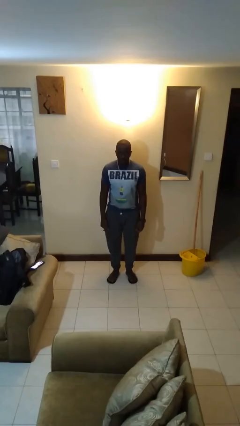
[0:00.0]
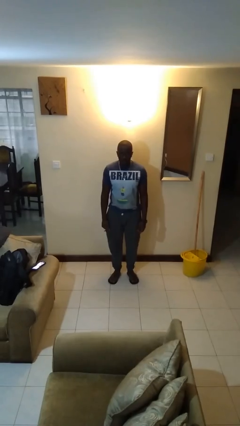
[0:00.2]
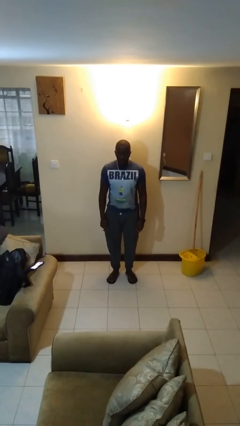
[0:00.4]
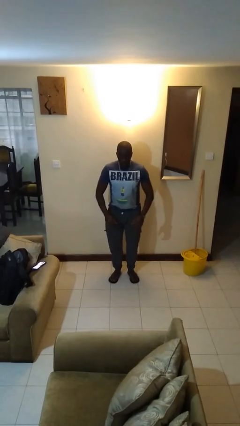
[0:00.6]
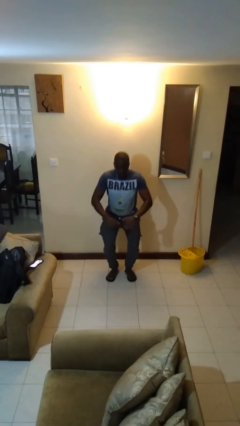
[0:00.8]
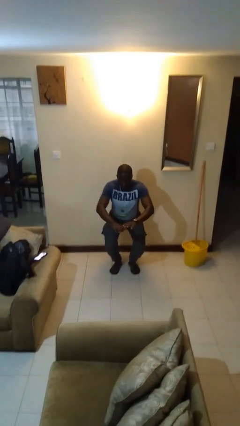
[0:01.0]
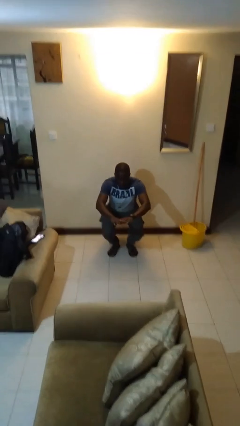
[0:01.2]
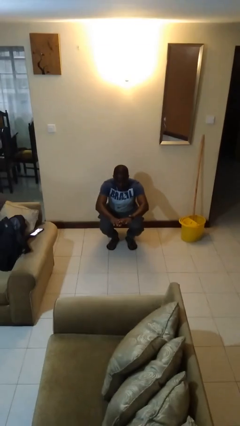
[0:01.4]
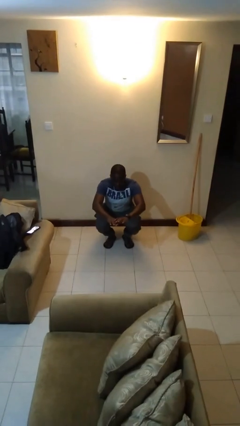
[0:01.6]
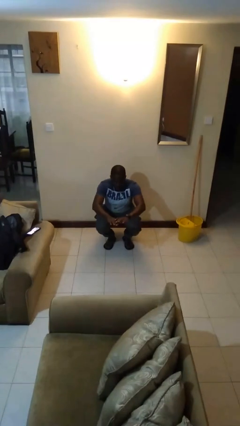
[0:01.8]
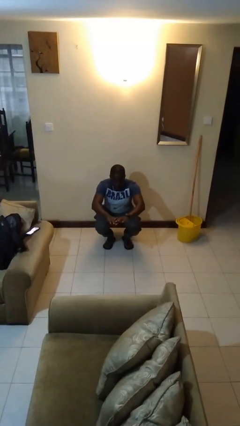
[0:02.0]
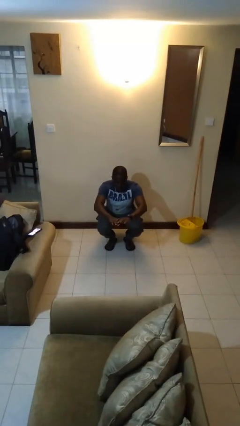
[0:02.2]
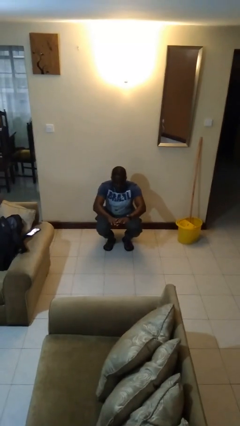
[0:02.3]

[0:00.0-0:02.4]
person squats

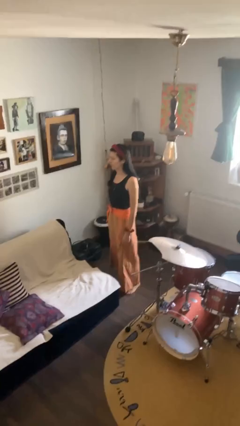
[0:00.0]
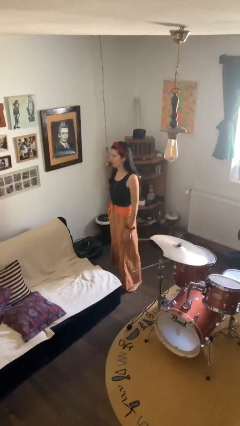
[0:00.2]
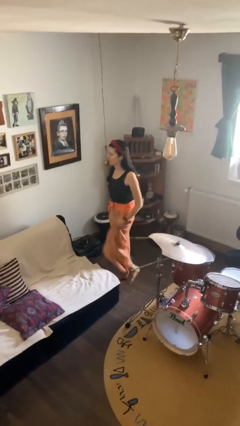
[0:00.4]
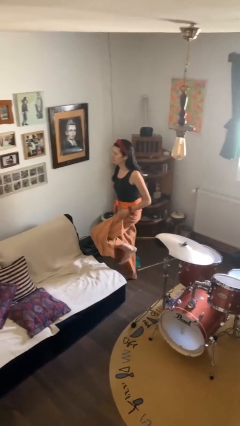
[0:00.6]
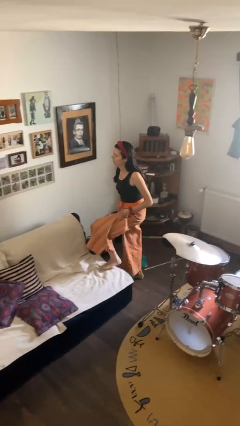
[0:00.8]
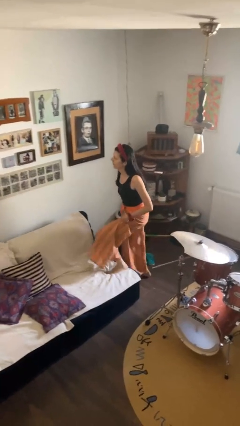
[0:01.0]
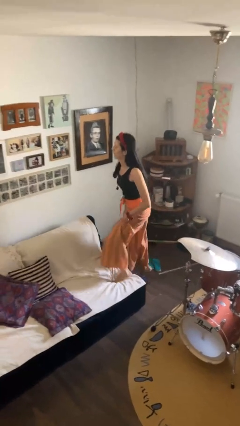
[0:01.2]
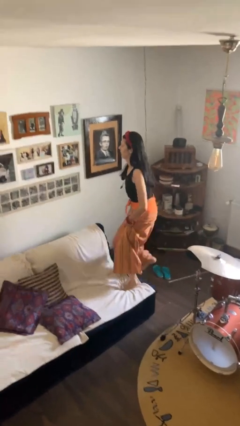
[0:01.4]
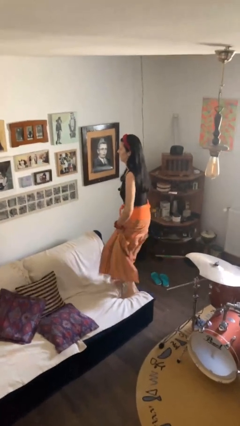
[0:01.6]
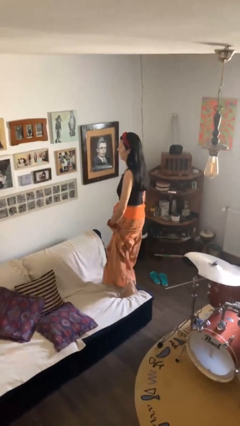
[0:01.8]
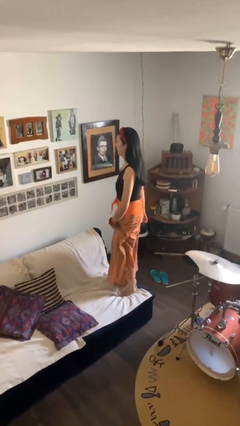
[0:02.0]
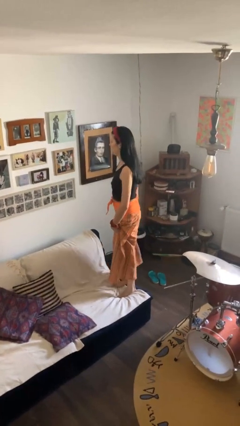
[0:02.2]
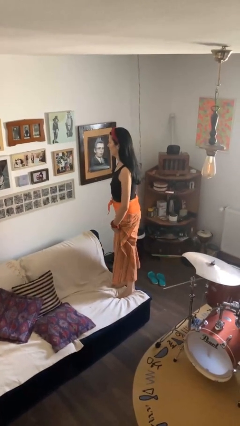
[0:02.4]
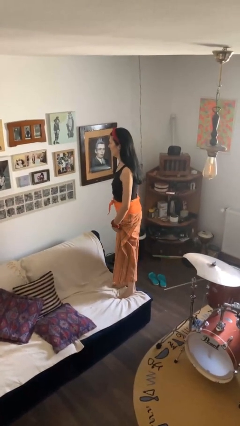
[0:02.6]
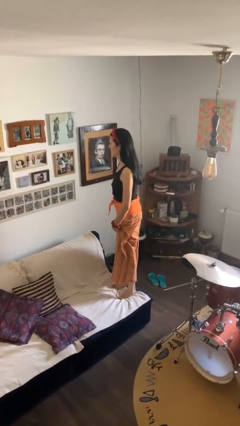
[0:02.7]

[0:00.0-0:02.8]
person climbs on couch

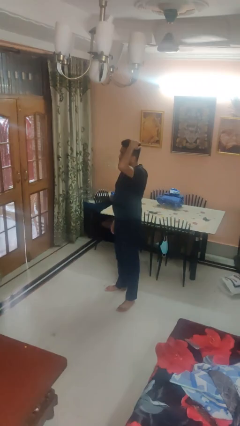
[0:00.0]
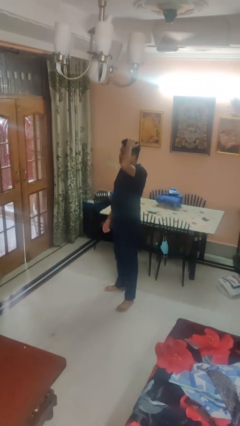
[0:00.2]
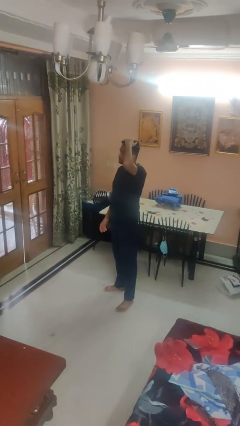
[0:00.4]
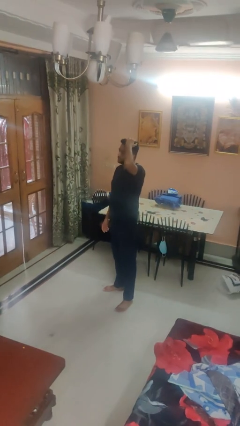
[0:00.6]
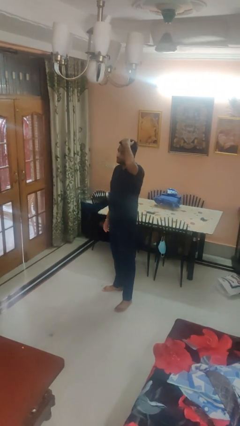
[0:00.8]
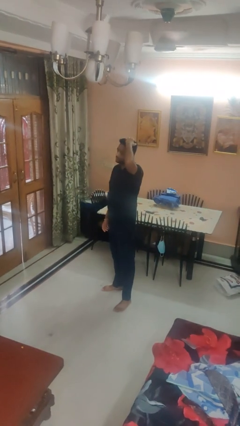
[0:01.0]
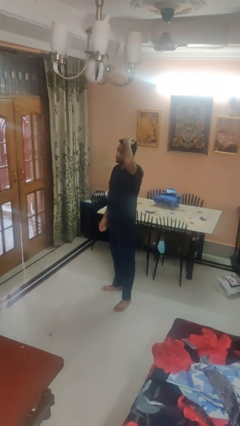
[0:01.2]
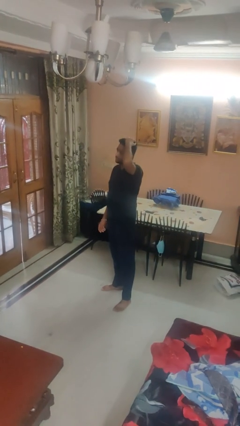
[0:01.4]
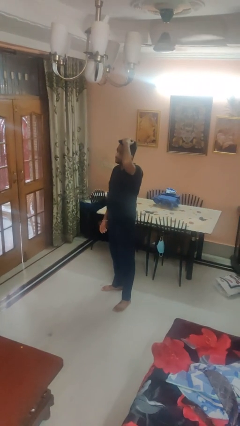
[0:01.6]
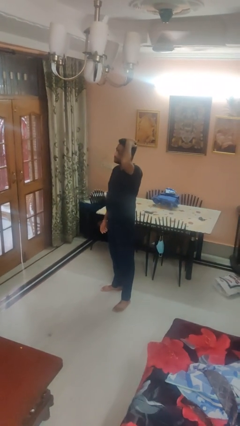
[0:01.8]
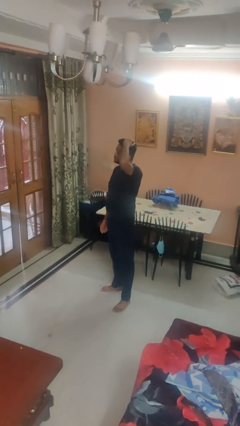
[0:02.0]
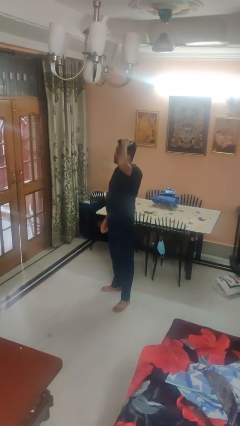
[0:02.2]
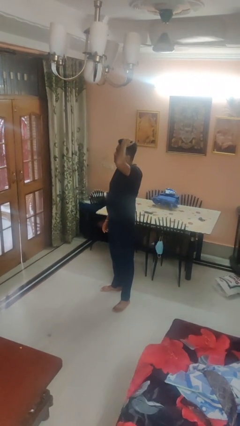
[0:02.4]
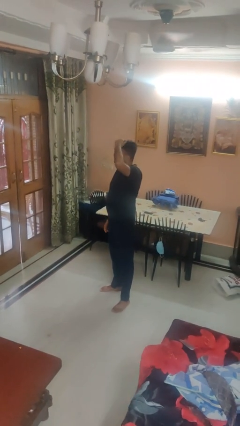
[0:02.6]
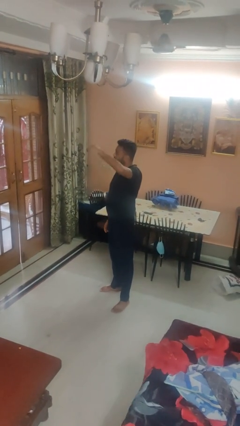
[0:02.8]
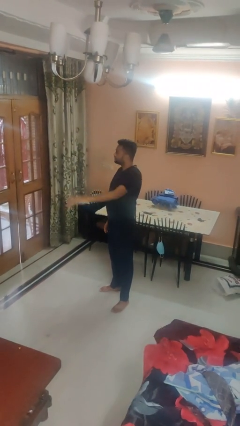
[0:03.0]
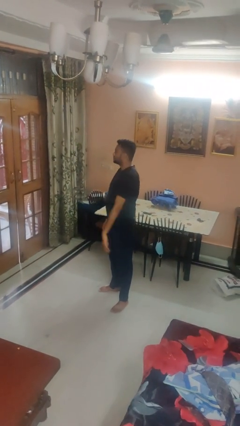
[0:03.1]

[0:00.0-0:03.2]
person pats head

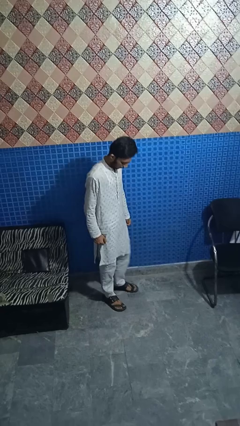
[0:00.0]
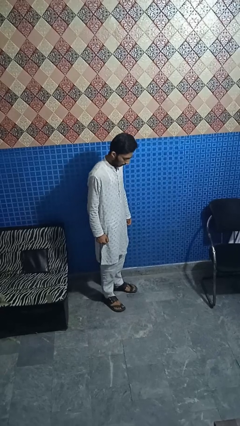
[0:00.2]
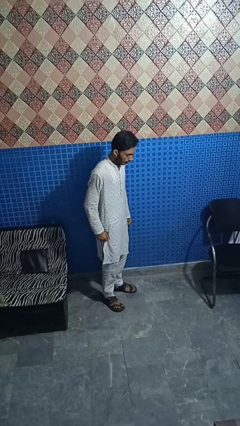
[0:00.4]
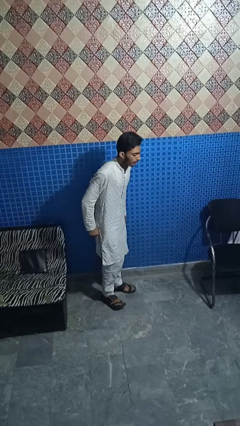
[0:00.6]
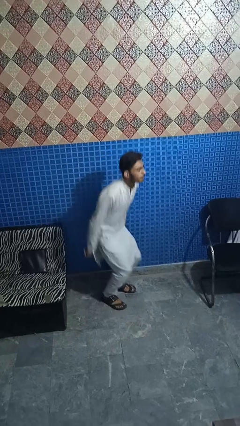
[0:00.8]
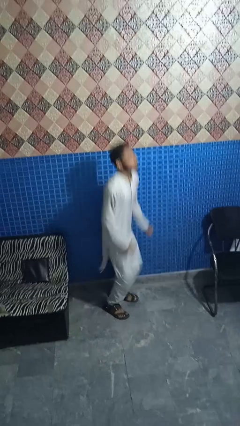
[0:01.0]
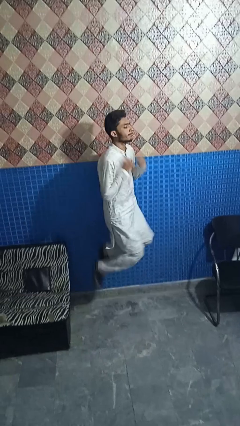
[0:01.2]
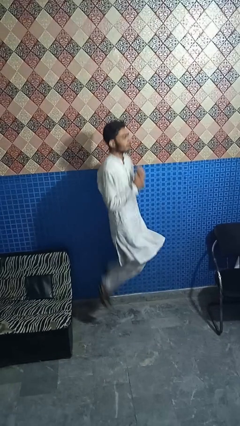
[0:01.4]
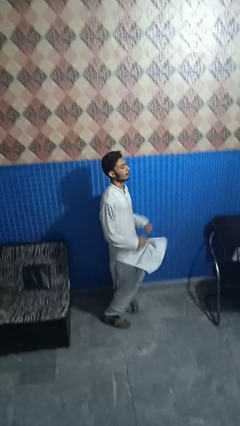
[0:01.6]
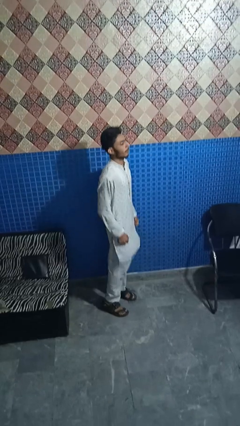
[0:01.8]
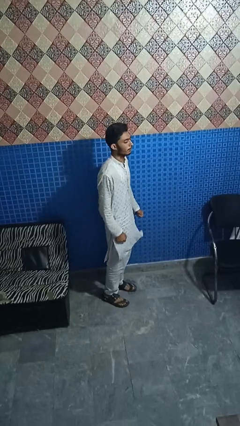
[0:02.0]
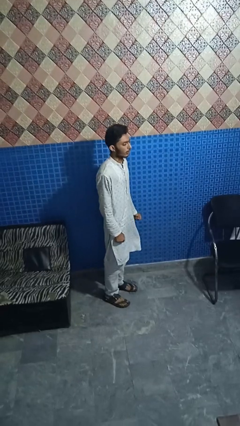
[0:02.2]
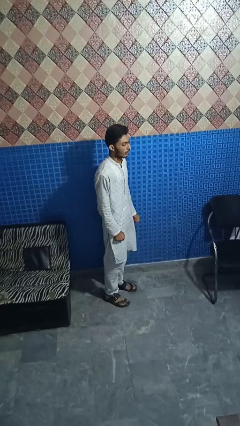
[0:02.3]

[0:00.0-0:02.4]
person jumps

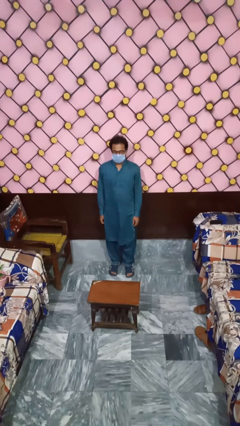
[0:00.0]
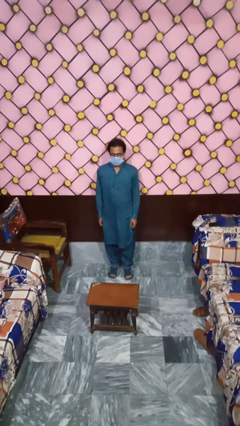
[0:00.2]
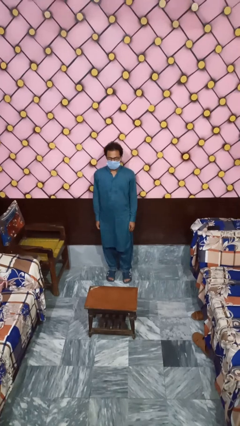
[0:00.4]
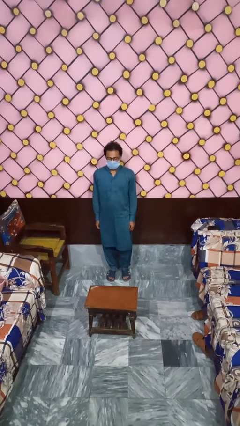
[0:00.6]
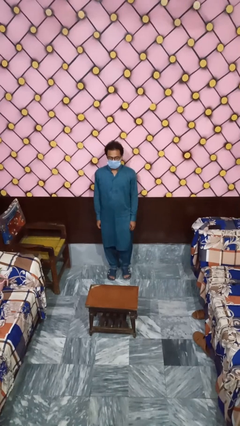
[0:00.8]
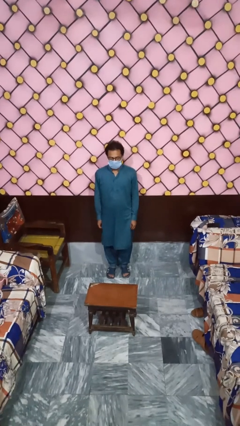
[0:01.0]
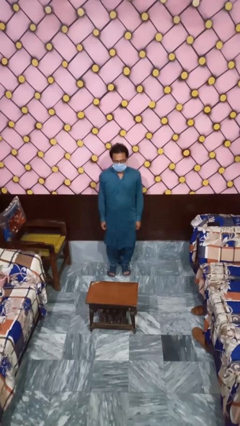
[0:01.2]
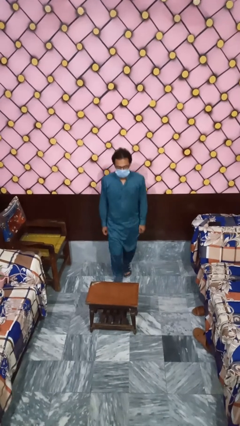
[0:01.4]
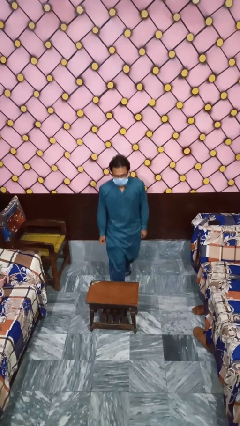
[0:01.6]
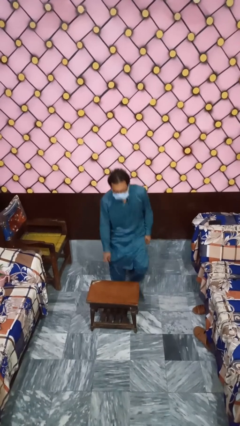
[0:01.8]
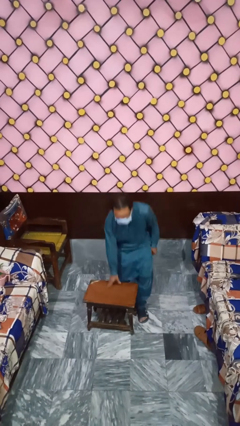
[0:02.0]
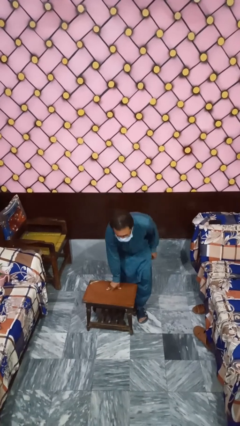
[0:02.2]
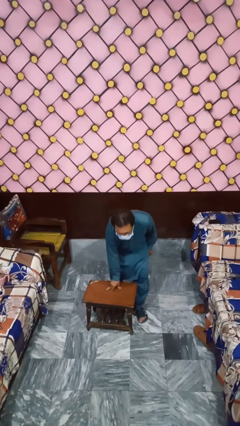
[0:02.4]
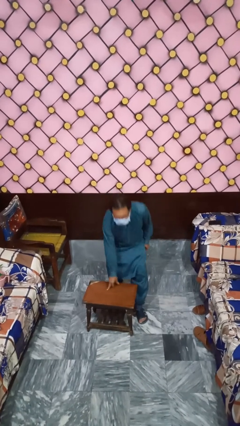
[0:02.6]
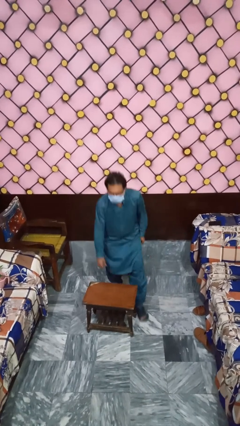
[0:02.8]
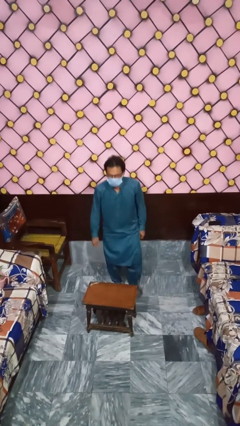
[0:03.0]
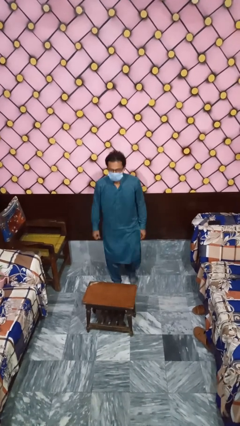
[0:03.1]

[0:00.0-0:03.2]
person bumps into table

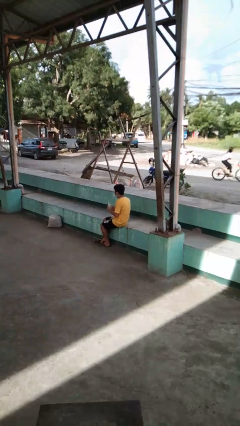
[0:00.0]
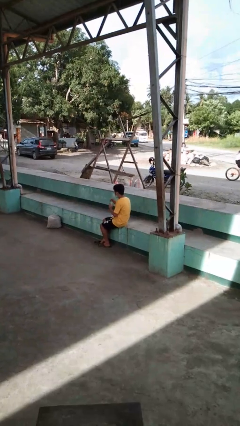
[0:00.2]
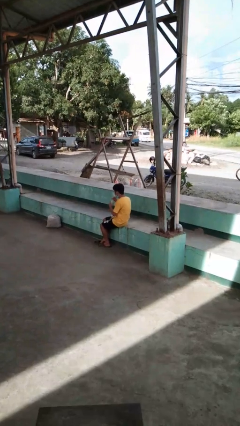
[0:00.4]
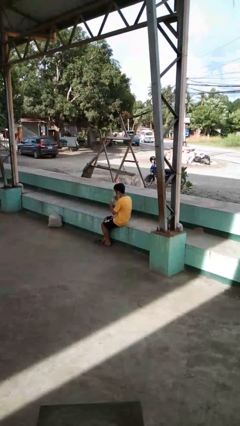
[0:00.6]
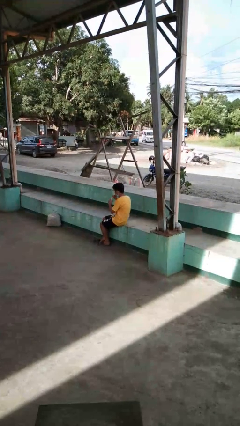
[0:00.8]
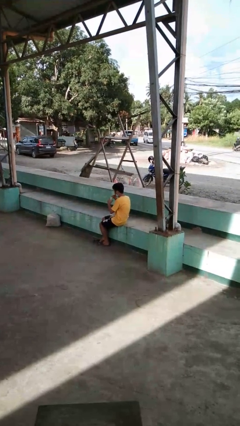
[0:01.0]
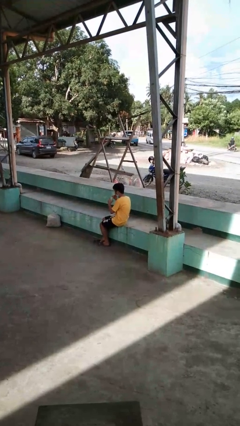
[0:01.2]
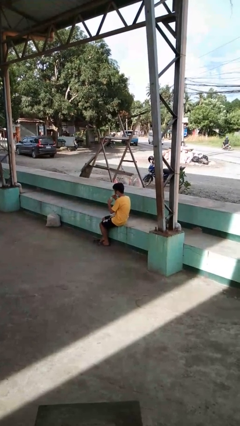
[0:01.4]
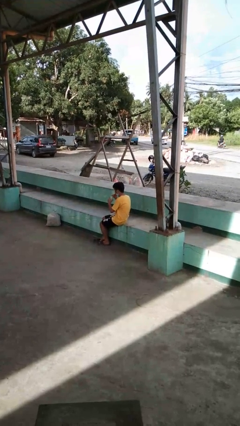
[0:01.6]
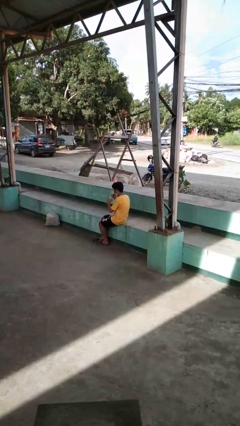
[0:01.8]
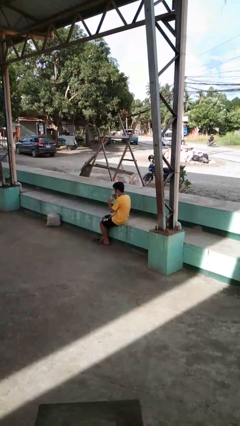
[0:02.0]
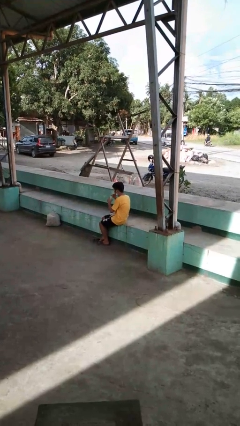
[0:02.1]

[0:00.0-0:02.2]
person drinks from straw

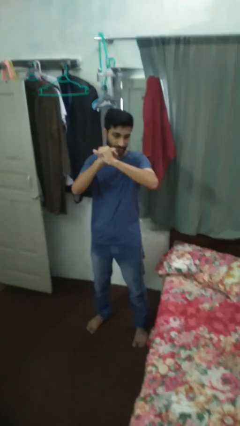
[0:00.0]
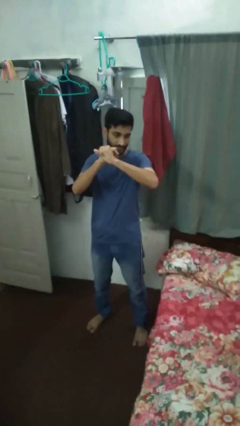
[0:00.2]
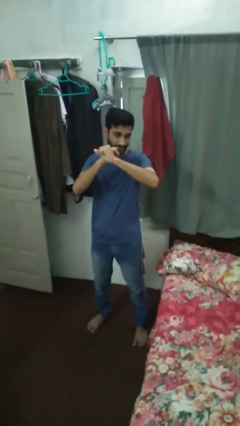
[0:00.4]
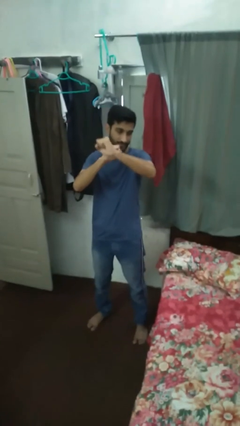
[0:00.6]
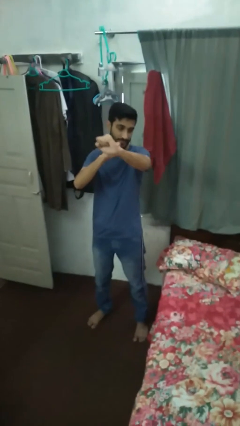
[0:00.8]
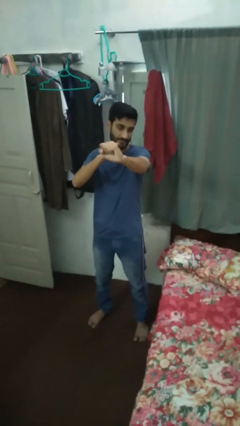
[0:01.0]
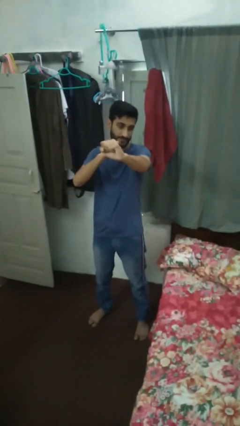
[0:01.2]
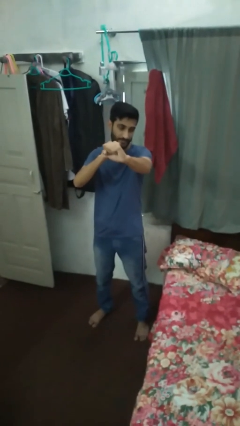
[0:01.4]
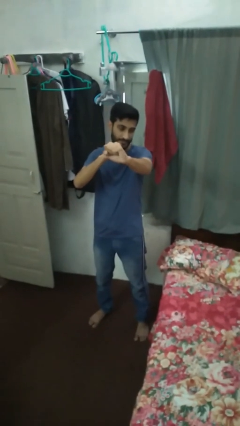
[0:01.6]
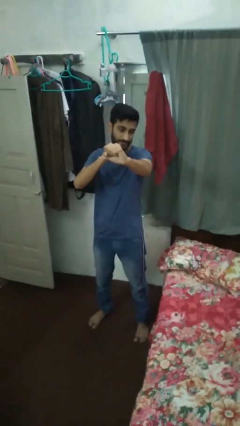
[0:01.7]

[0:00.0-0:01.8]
person gestures zoom in
